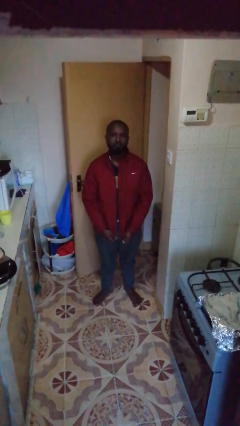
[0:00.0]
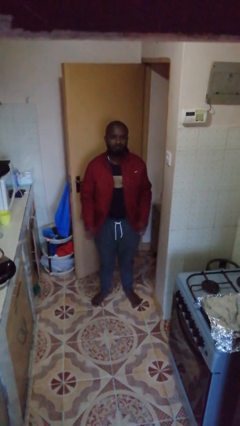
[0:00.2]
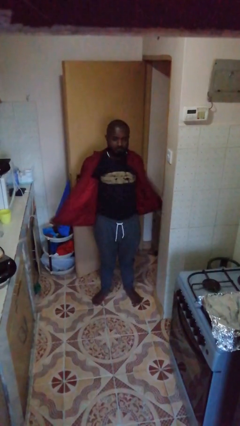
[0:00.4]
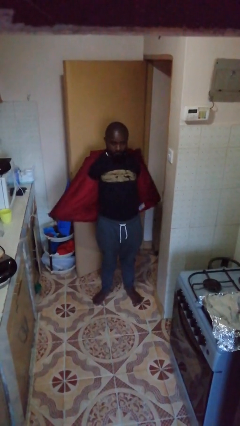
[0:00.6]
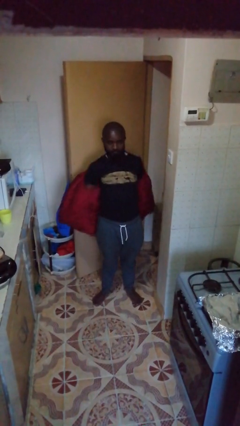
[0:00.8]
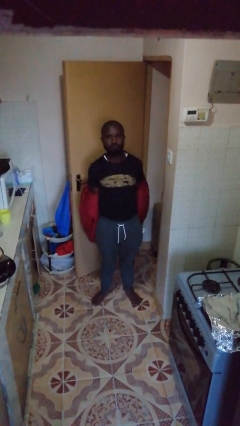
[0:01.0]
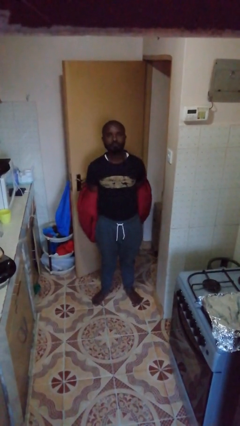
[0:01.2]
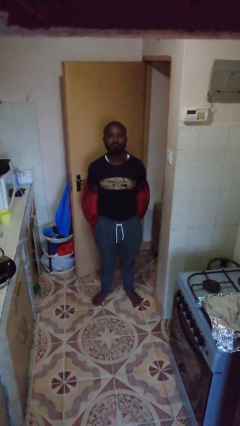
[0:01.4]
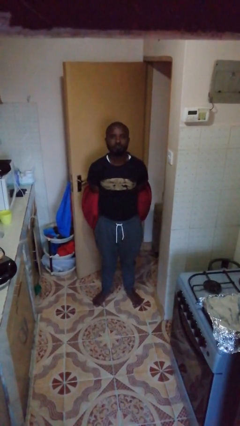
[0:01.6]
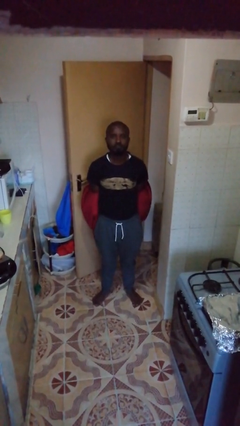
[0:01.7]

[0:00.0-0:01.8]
person takes off jacket

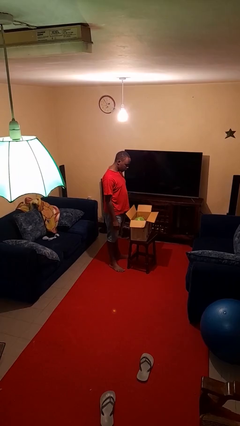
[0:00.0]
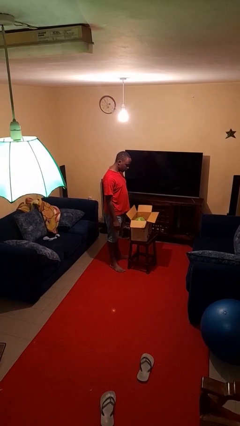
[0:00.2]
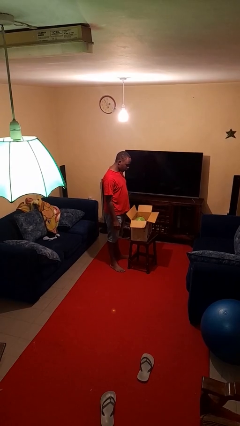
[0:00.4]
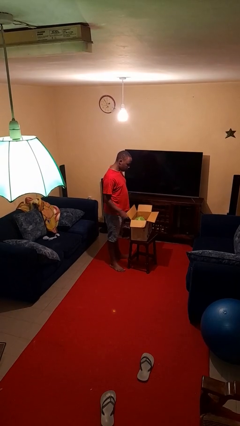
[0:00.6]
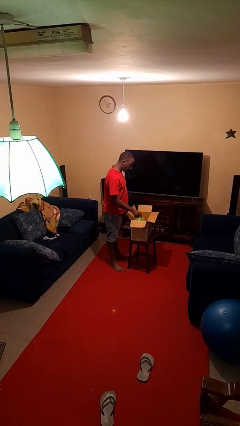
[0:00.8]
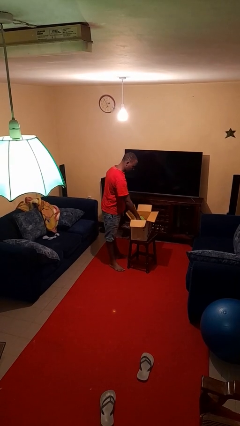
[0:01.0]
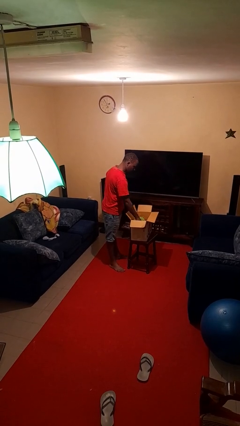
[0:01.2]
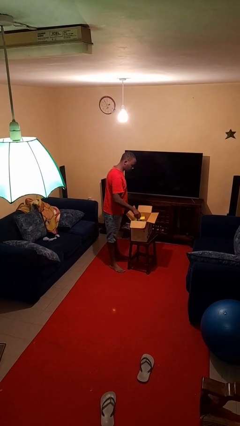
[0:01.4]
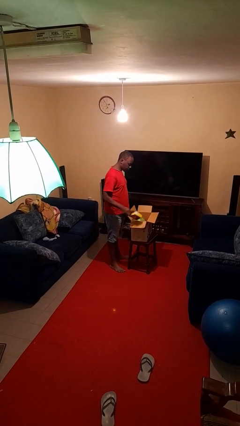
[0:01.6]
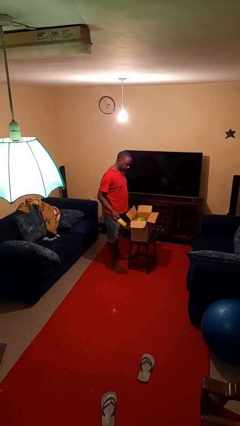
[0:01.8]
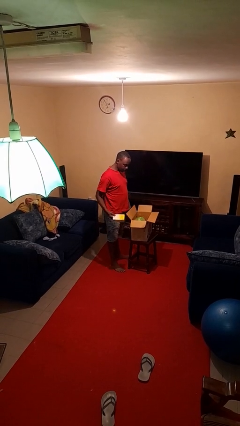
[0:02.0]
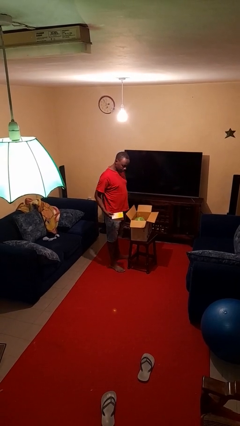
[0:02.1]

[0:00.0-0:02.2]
person takes object from box

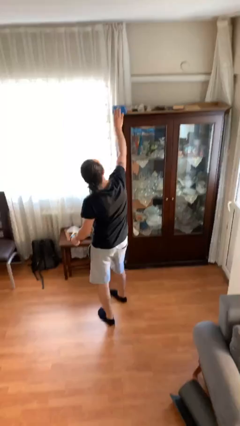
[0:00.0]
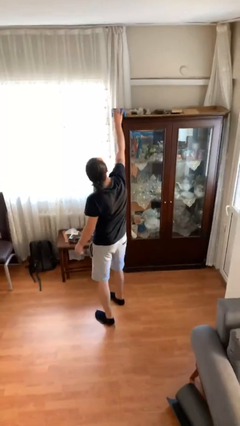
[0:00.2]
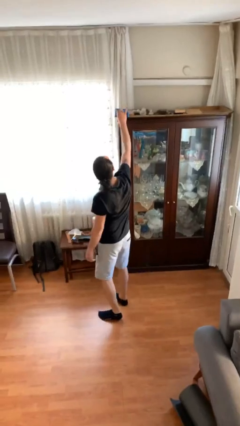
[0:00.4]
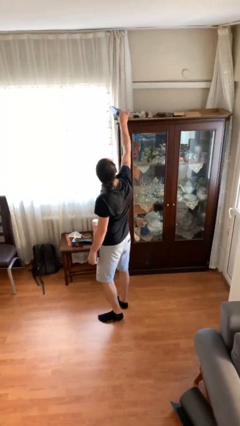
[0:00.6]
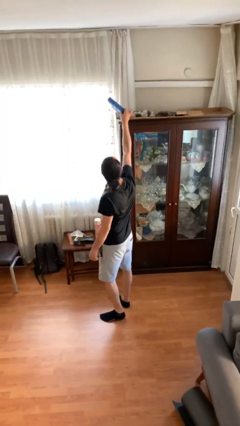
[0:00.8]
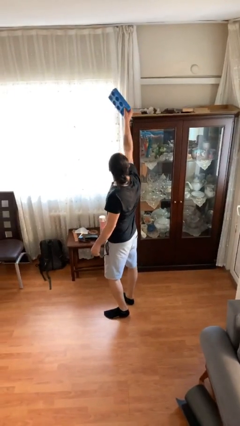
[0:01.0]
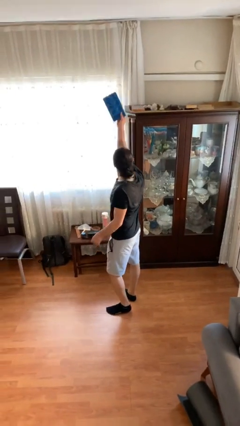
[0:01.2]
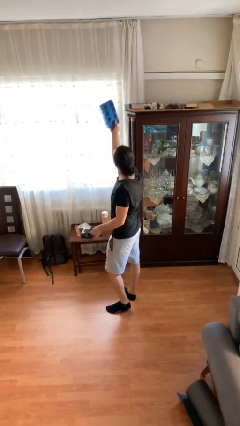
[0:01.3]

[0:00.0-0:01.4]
person picks up object from shelf

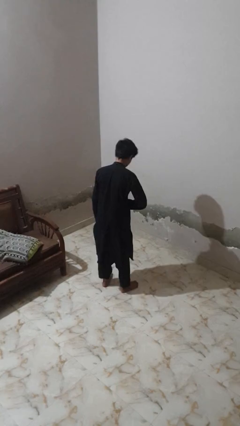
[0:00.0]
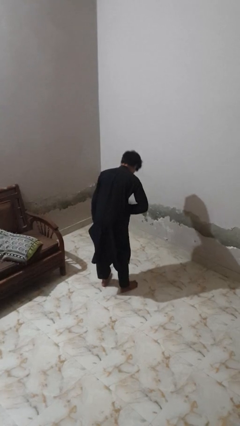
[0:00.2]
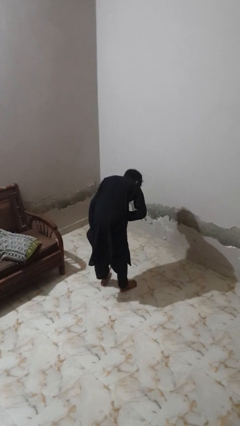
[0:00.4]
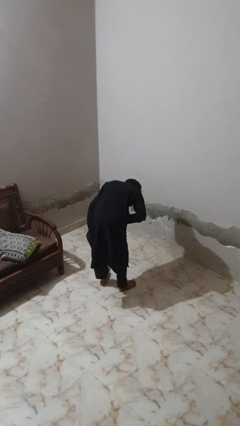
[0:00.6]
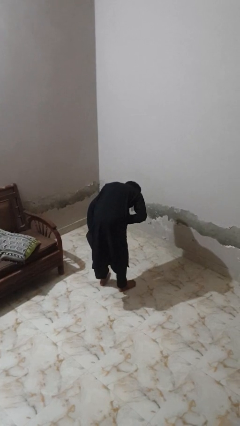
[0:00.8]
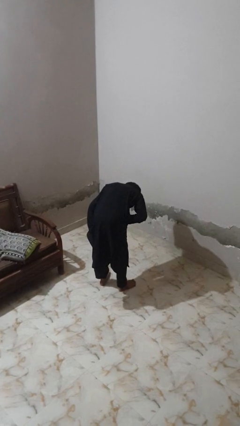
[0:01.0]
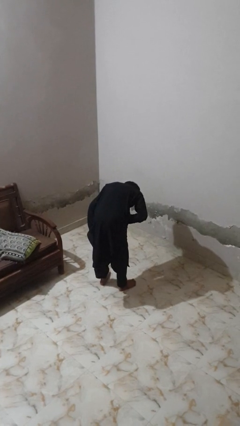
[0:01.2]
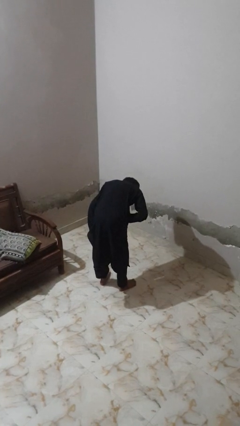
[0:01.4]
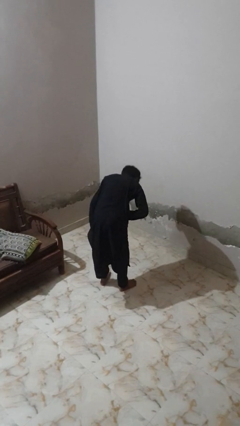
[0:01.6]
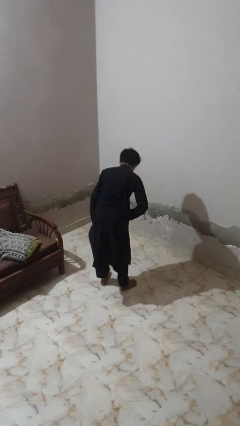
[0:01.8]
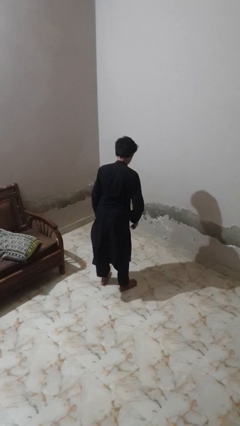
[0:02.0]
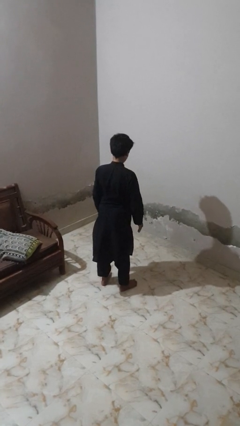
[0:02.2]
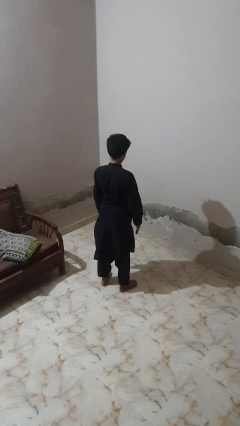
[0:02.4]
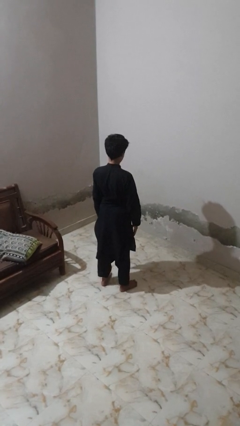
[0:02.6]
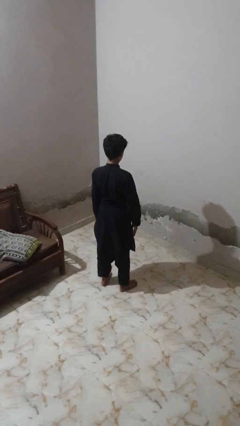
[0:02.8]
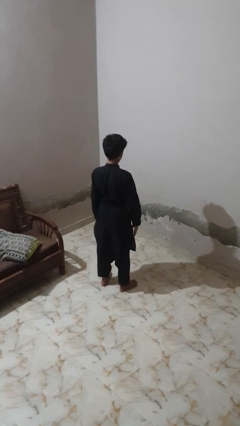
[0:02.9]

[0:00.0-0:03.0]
person bows

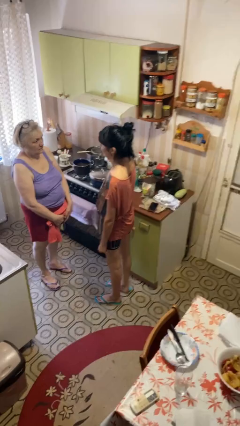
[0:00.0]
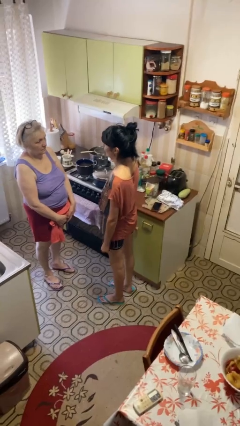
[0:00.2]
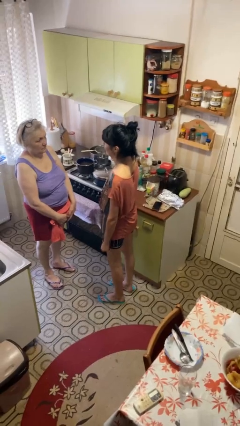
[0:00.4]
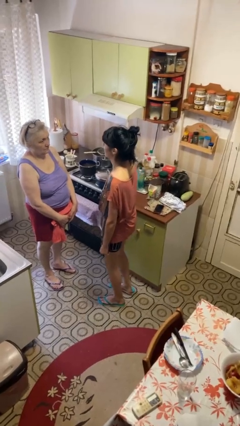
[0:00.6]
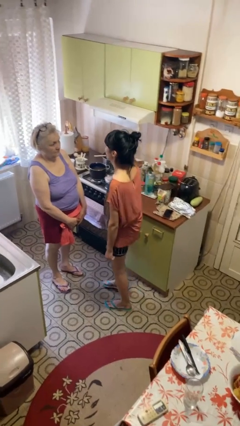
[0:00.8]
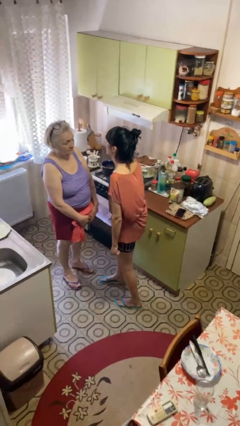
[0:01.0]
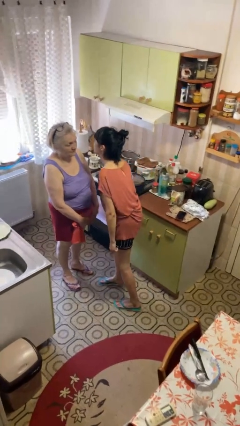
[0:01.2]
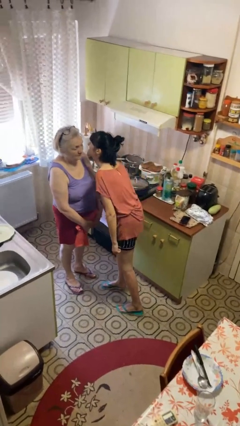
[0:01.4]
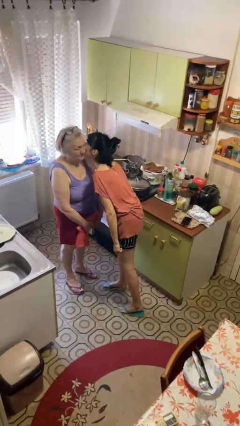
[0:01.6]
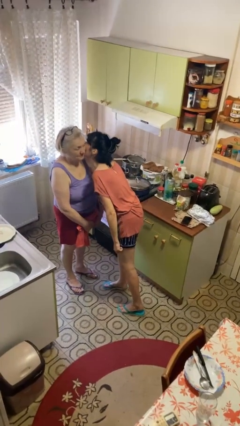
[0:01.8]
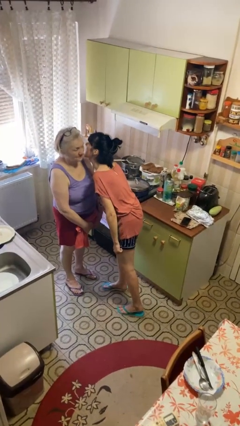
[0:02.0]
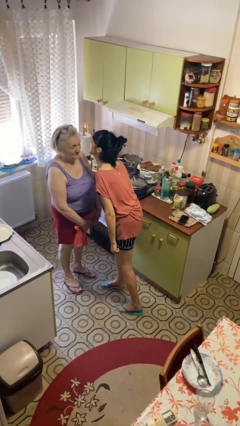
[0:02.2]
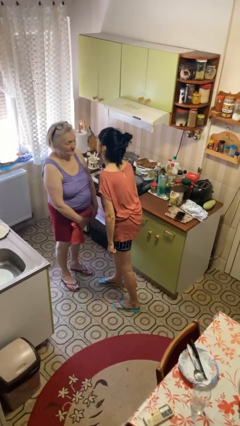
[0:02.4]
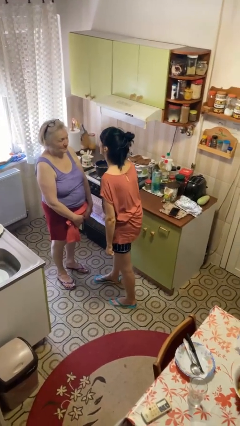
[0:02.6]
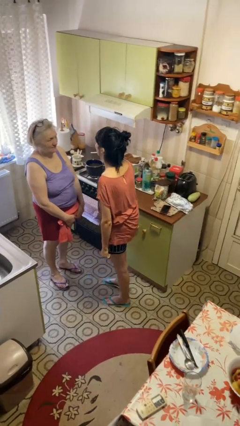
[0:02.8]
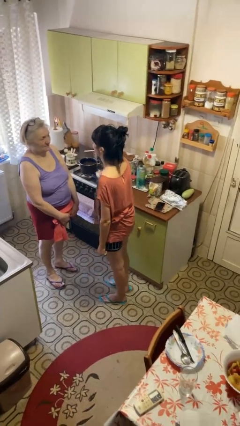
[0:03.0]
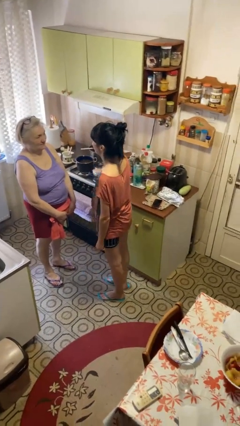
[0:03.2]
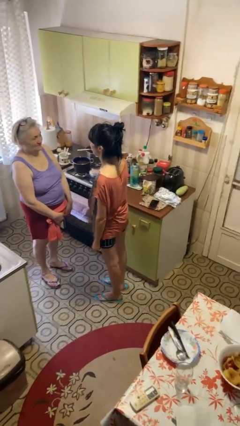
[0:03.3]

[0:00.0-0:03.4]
person kisses cheek of person

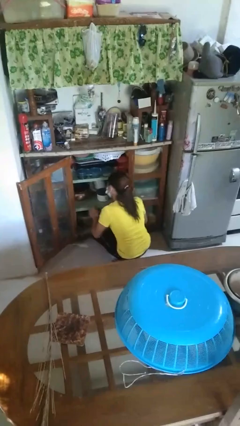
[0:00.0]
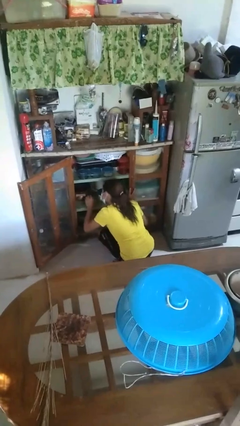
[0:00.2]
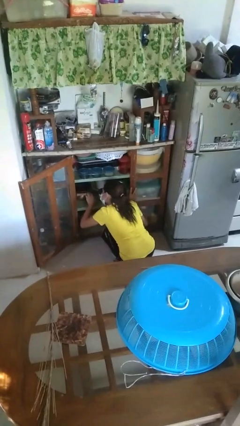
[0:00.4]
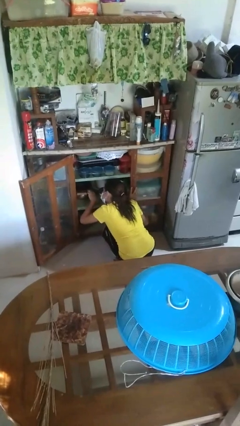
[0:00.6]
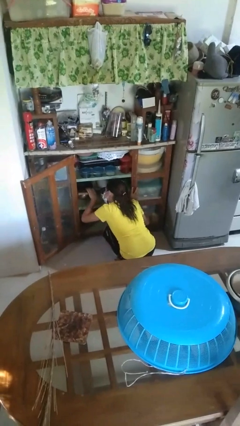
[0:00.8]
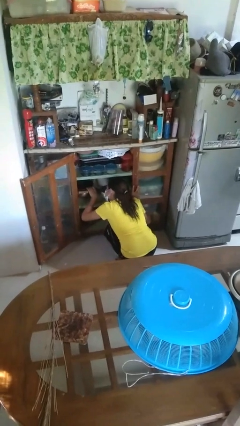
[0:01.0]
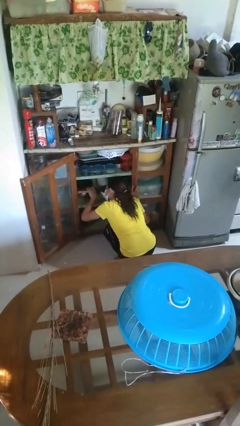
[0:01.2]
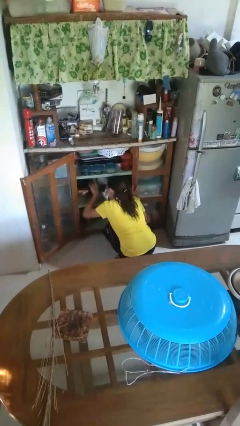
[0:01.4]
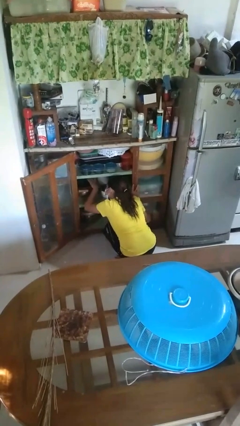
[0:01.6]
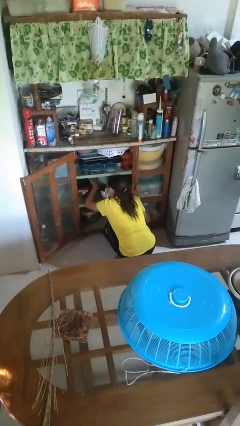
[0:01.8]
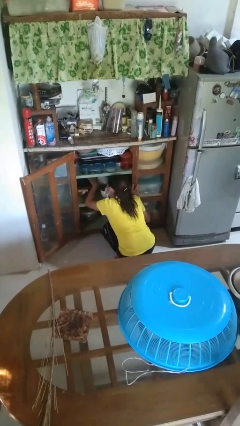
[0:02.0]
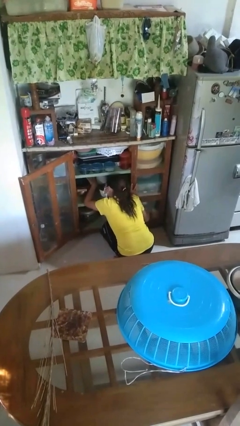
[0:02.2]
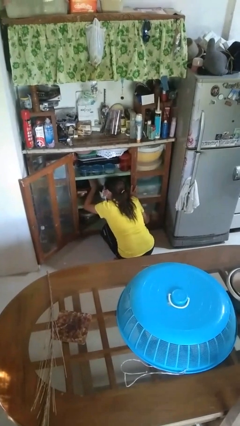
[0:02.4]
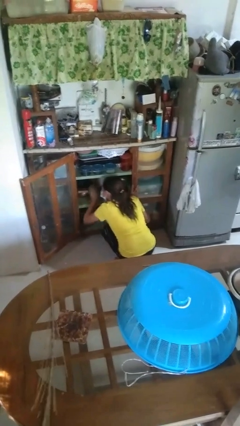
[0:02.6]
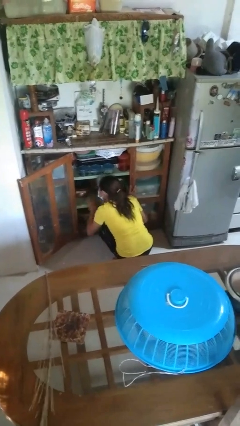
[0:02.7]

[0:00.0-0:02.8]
person searches in cabinet

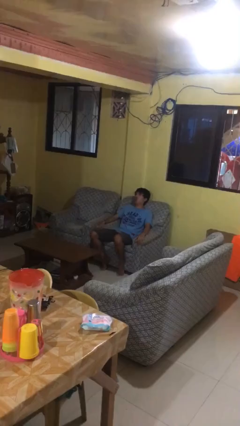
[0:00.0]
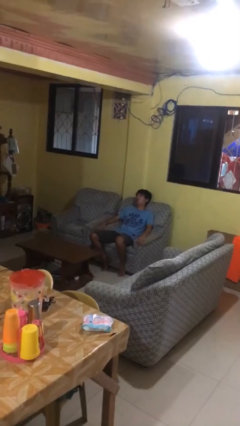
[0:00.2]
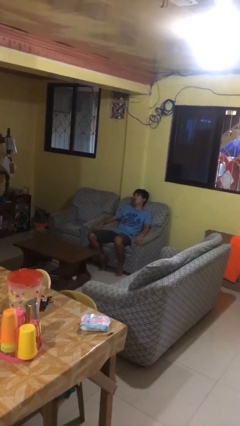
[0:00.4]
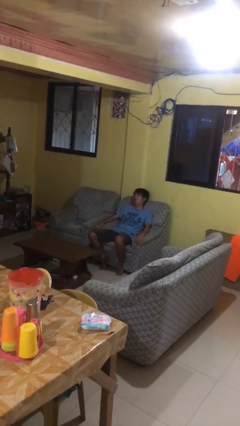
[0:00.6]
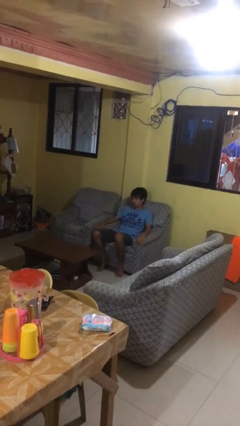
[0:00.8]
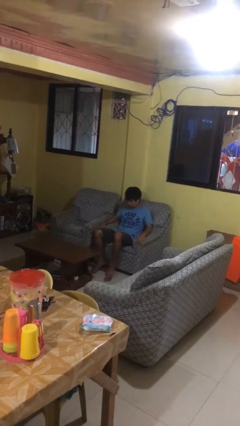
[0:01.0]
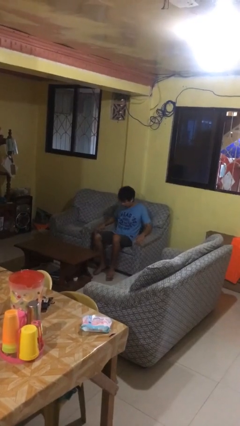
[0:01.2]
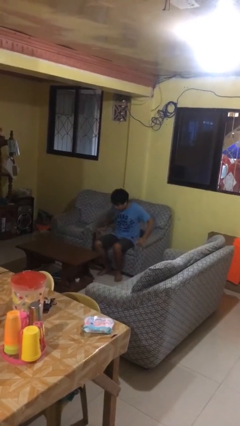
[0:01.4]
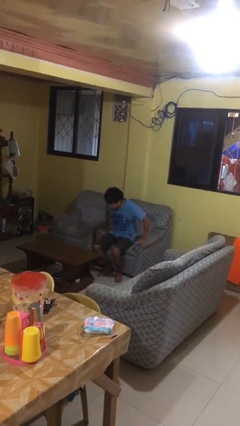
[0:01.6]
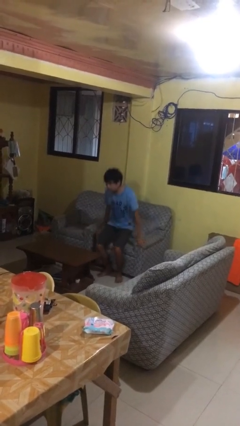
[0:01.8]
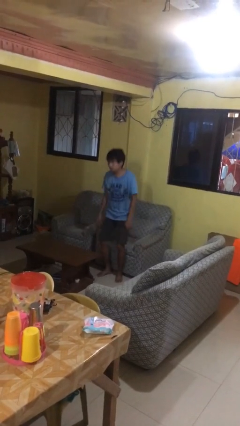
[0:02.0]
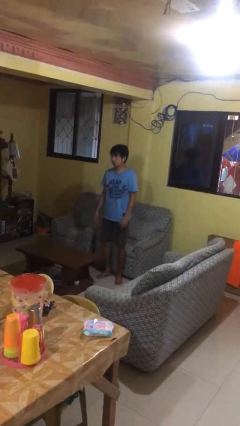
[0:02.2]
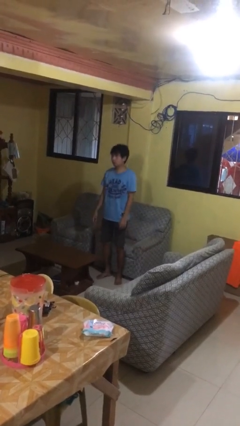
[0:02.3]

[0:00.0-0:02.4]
person stands up

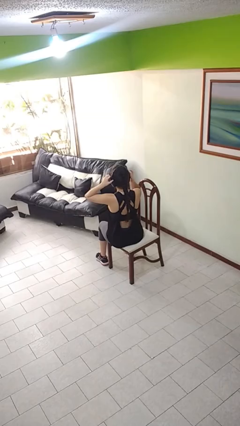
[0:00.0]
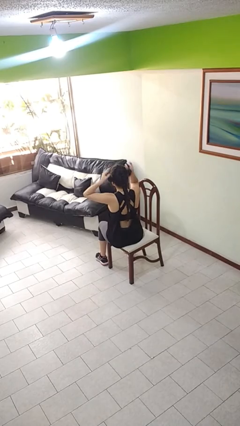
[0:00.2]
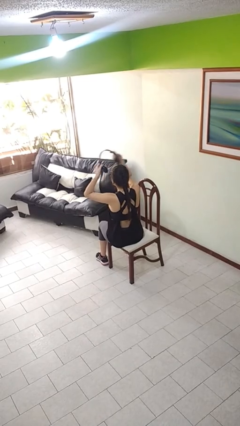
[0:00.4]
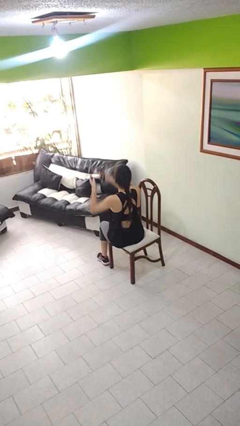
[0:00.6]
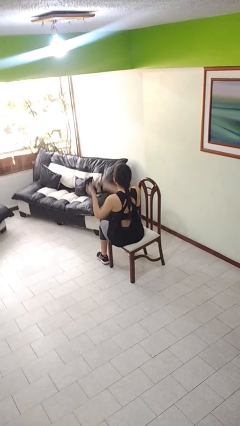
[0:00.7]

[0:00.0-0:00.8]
person takes off headphones
